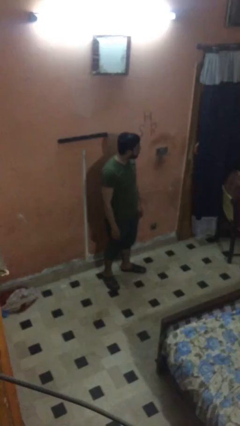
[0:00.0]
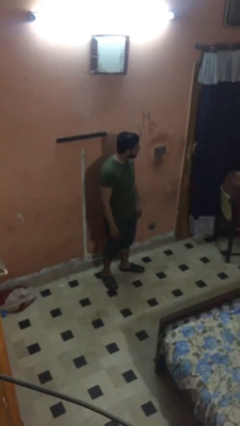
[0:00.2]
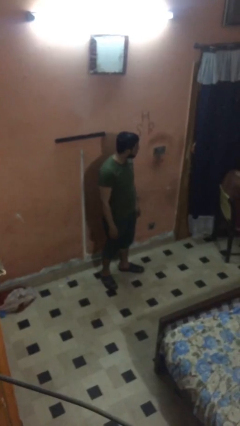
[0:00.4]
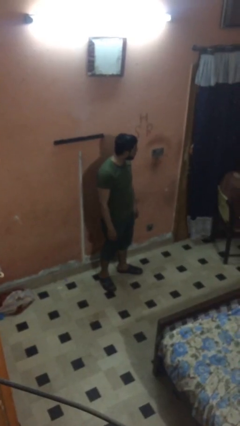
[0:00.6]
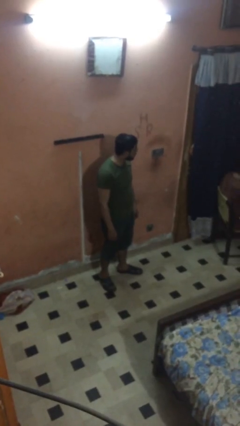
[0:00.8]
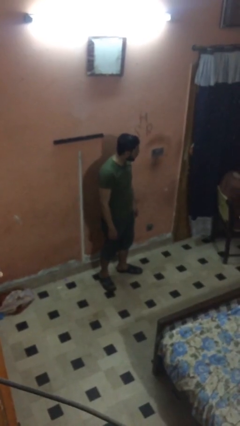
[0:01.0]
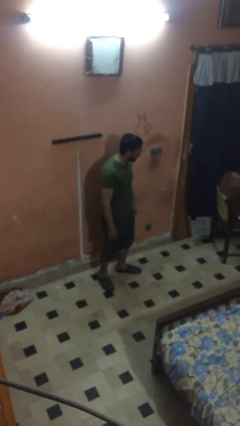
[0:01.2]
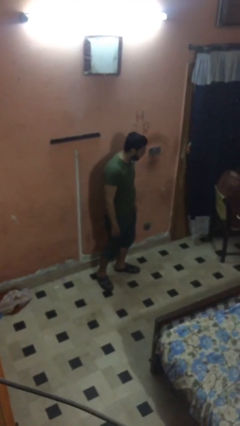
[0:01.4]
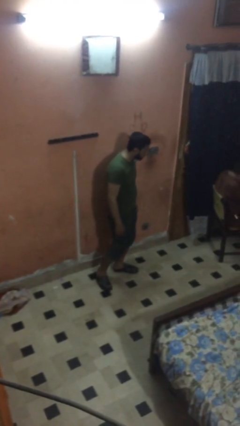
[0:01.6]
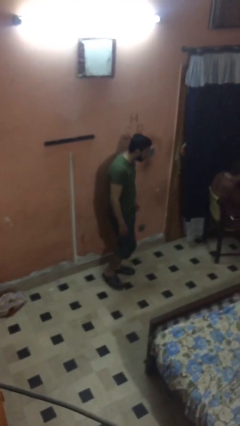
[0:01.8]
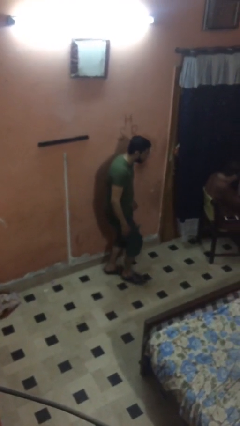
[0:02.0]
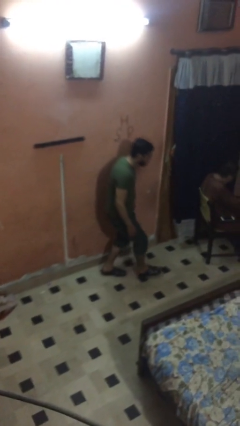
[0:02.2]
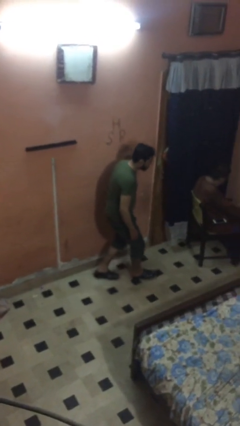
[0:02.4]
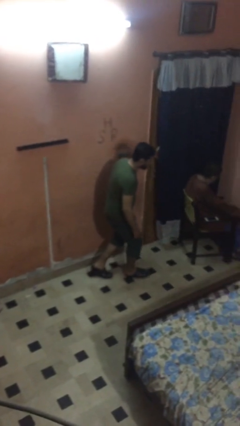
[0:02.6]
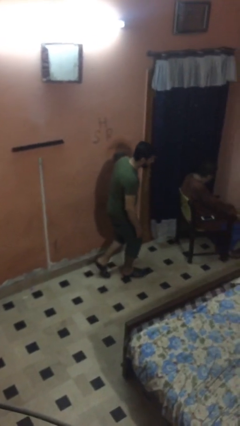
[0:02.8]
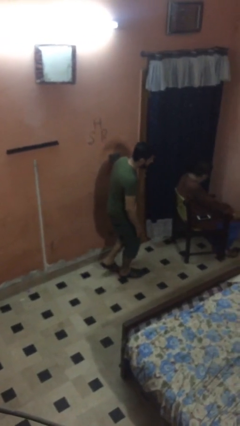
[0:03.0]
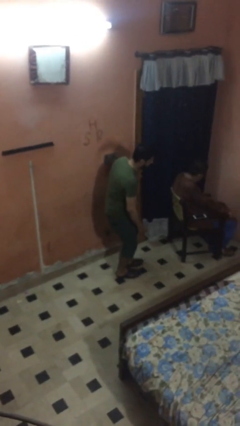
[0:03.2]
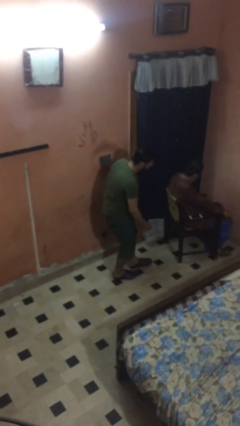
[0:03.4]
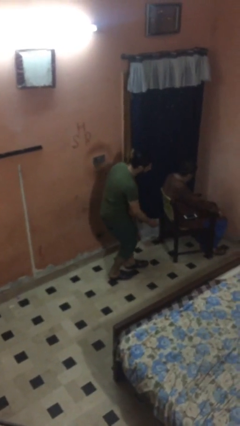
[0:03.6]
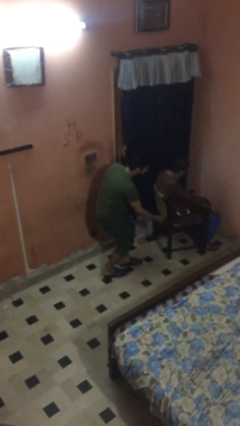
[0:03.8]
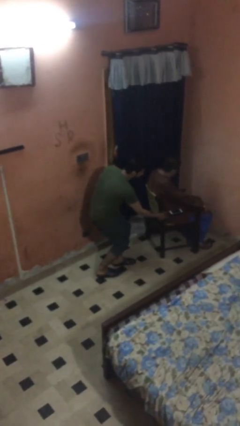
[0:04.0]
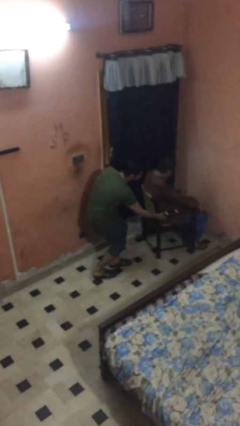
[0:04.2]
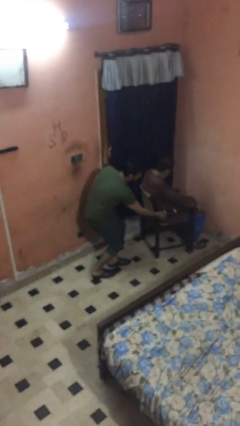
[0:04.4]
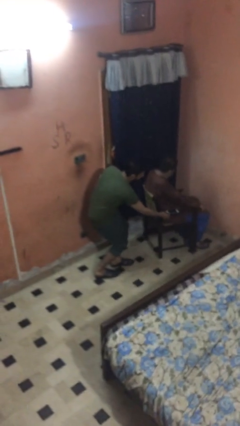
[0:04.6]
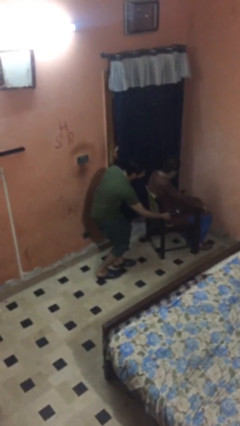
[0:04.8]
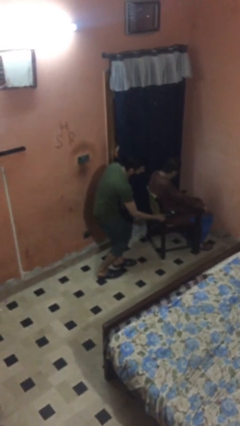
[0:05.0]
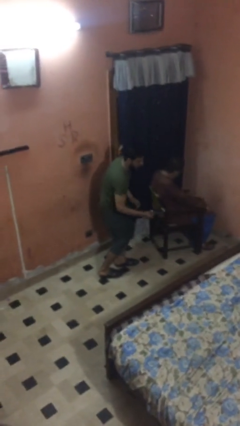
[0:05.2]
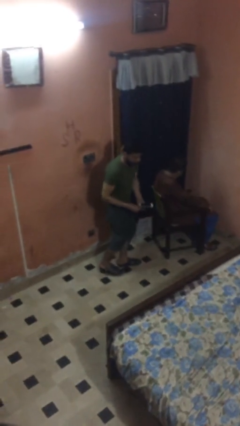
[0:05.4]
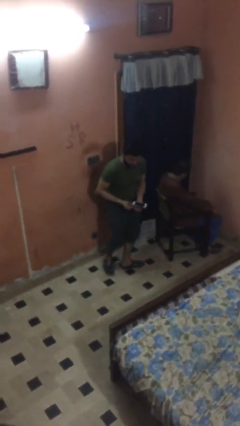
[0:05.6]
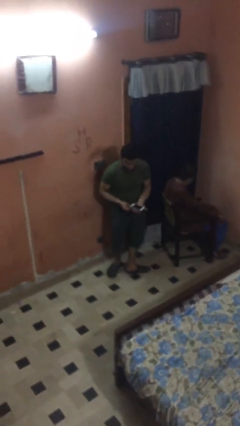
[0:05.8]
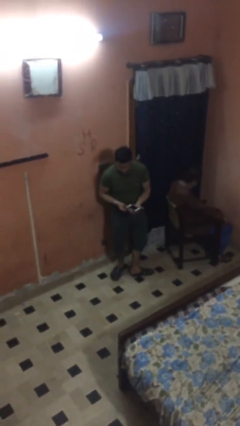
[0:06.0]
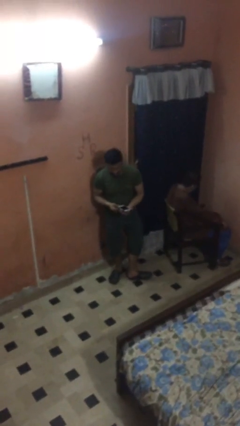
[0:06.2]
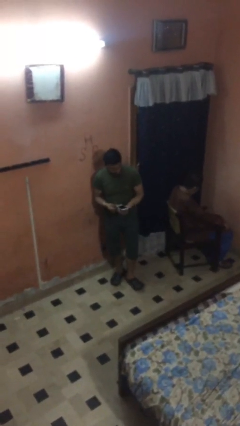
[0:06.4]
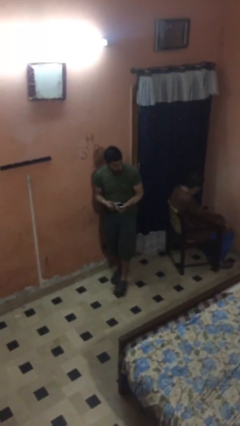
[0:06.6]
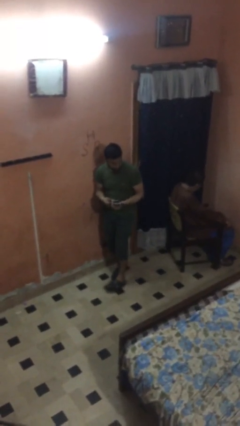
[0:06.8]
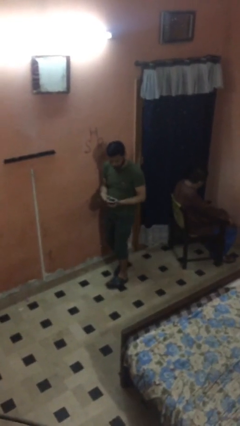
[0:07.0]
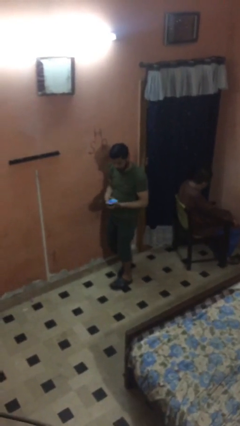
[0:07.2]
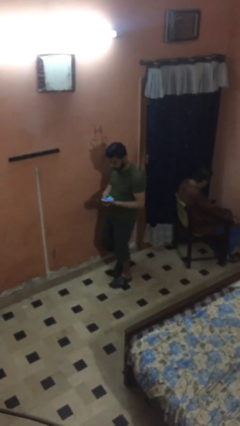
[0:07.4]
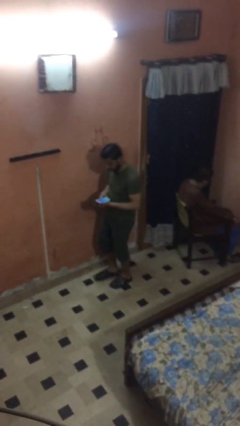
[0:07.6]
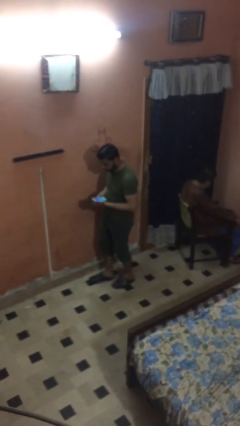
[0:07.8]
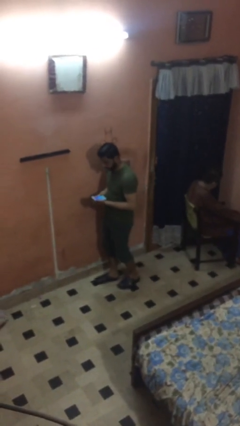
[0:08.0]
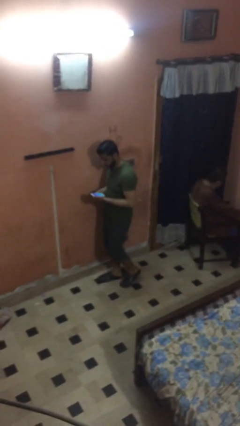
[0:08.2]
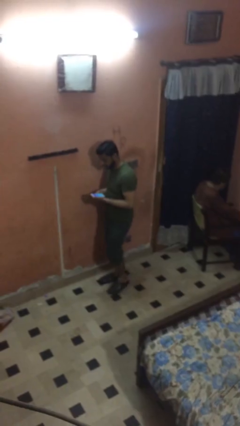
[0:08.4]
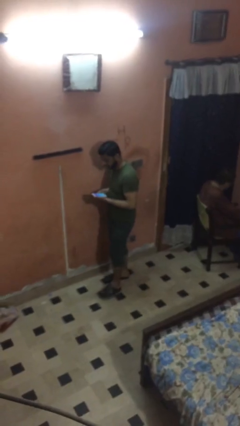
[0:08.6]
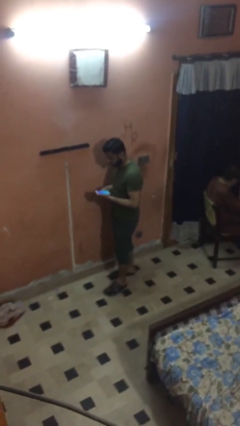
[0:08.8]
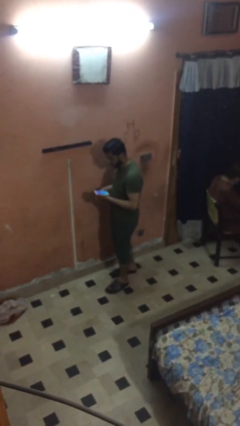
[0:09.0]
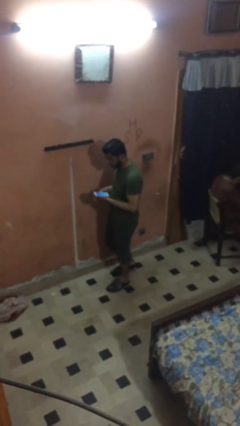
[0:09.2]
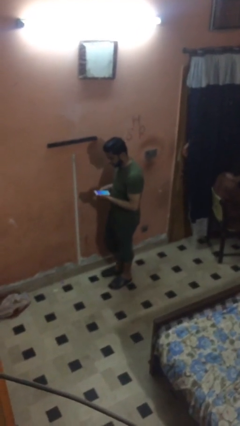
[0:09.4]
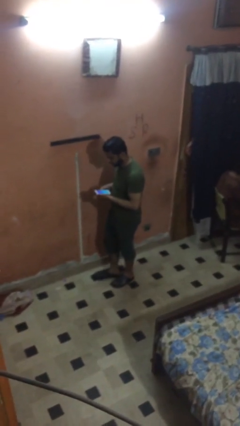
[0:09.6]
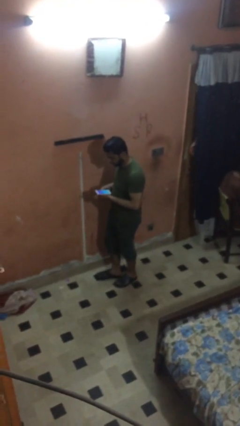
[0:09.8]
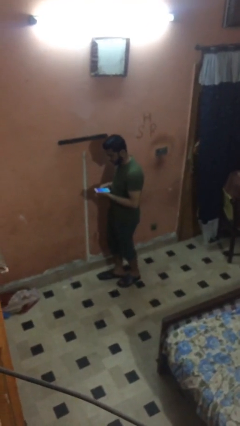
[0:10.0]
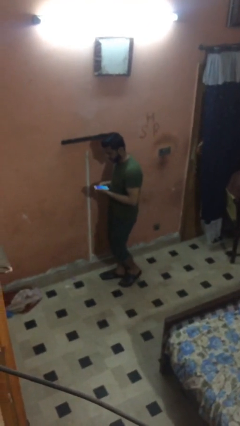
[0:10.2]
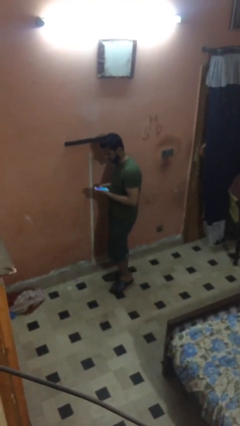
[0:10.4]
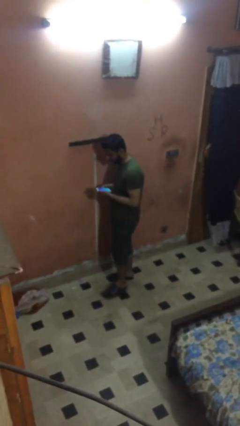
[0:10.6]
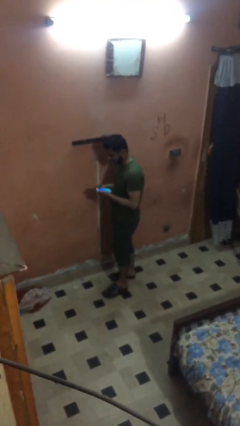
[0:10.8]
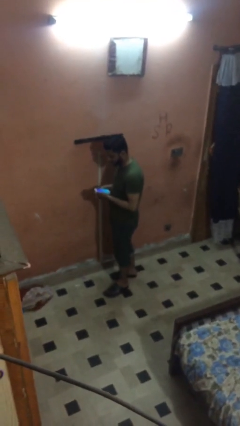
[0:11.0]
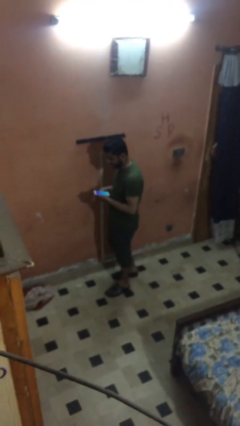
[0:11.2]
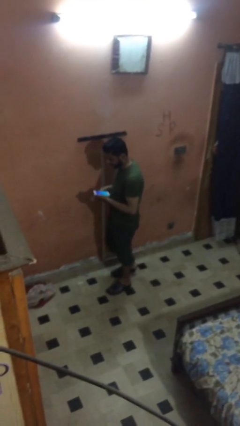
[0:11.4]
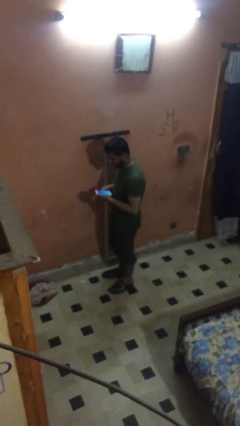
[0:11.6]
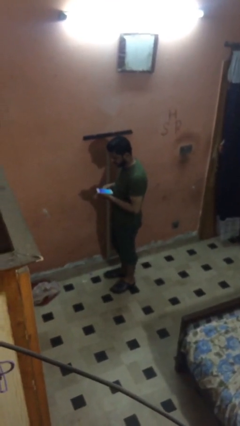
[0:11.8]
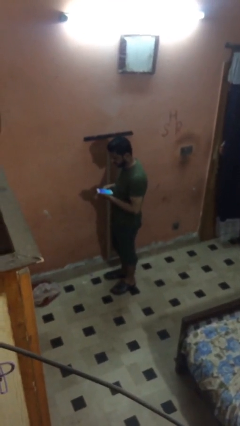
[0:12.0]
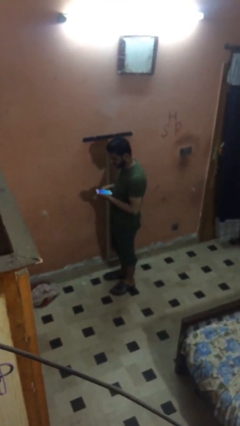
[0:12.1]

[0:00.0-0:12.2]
person steals object from person

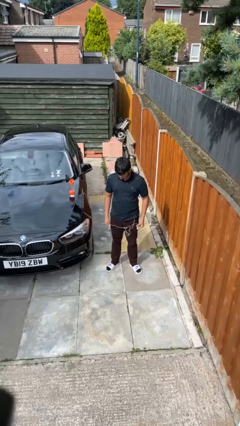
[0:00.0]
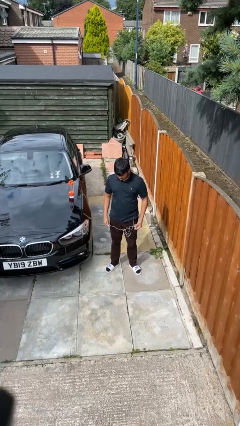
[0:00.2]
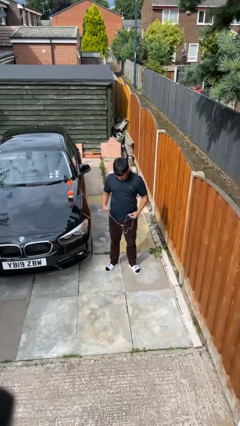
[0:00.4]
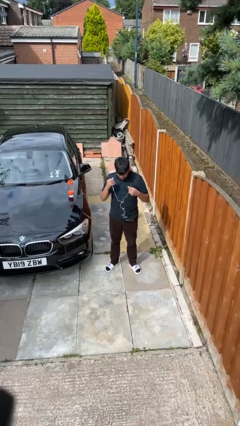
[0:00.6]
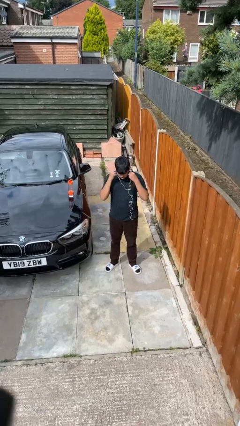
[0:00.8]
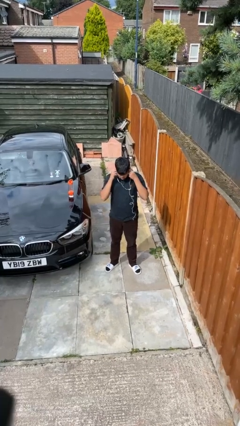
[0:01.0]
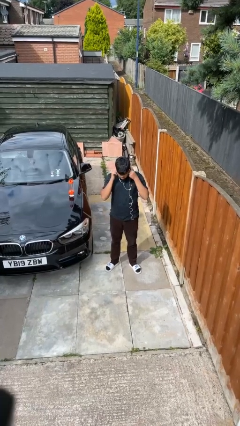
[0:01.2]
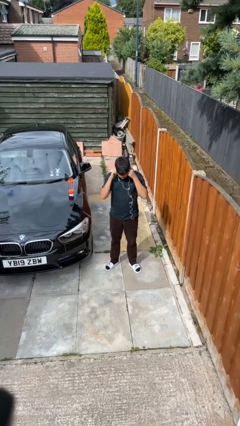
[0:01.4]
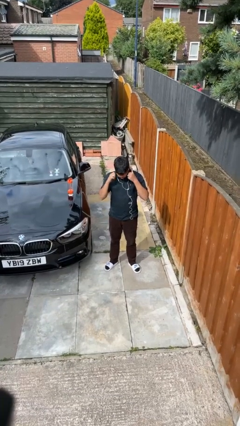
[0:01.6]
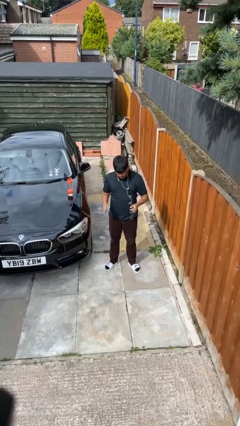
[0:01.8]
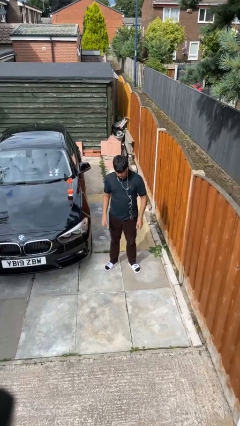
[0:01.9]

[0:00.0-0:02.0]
person puts on headphones

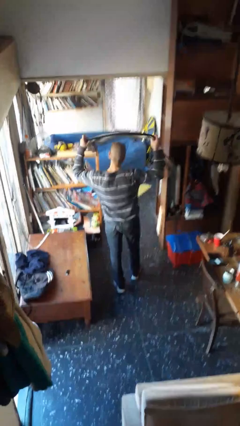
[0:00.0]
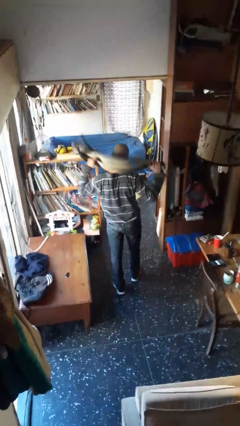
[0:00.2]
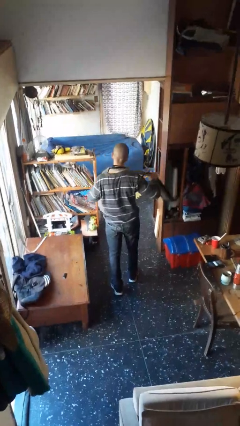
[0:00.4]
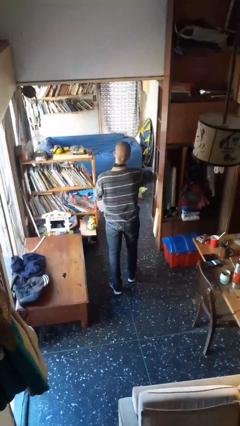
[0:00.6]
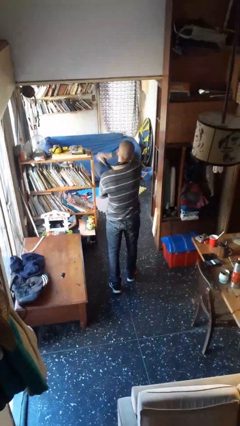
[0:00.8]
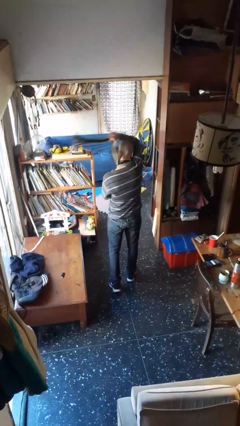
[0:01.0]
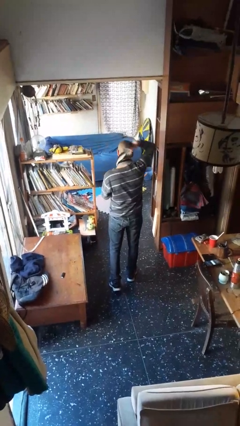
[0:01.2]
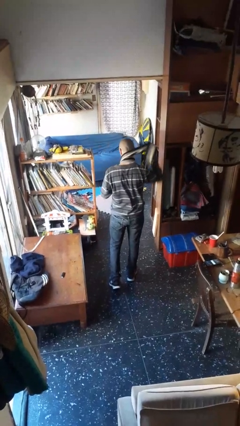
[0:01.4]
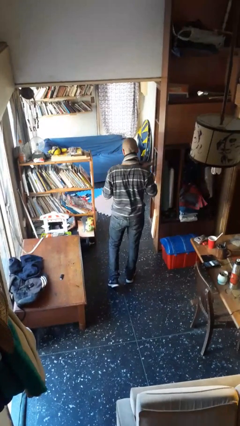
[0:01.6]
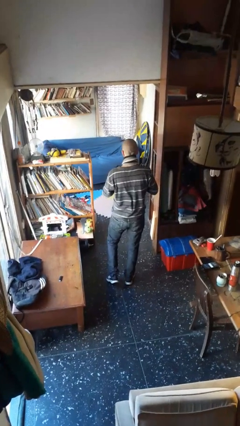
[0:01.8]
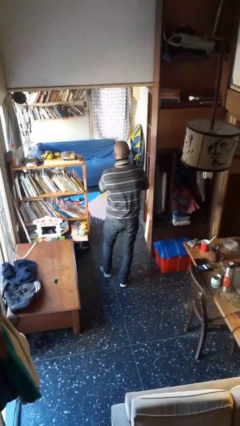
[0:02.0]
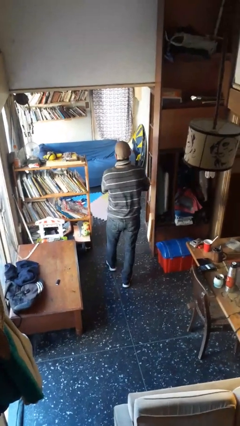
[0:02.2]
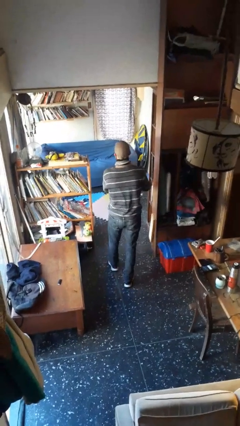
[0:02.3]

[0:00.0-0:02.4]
person puts on scarf

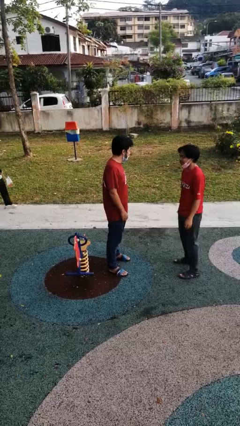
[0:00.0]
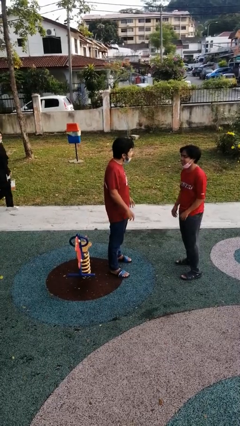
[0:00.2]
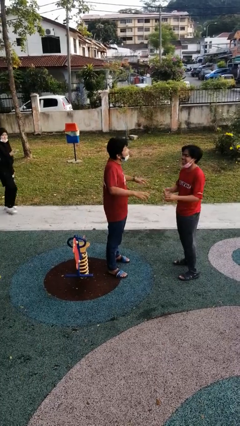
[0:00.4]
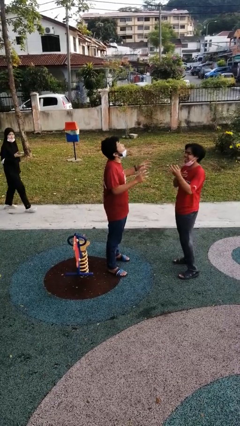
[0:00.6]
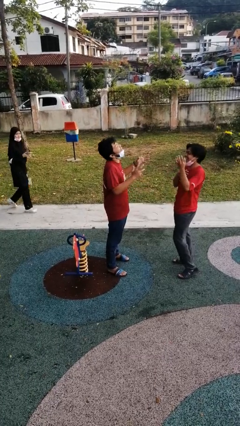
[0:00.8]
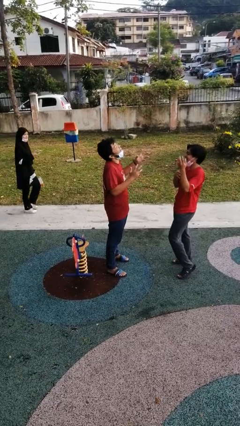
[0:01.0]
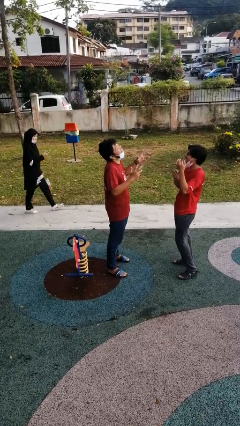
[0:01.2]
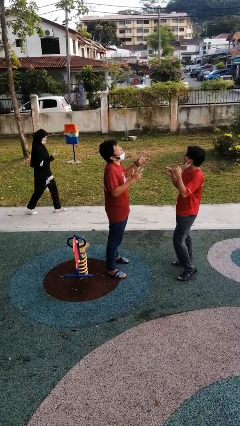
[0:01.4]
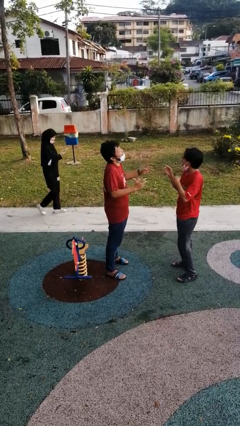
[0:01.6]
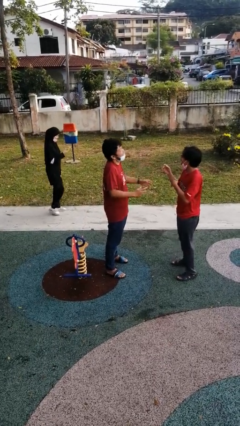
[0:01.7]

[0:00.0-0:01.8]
person laughs with person
